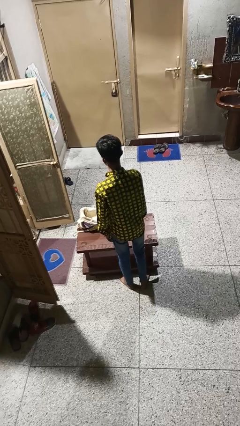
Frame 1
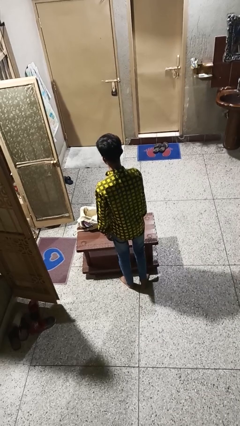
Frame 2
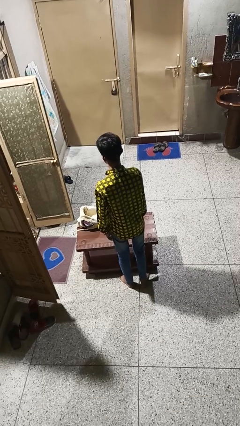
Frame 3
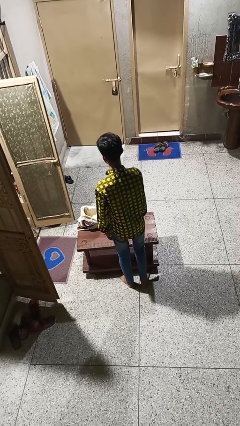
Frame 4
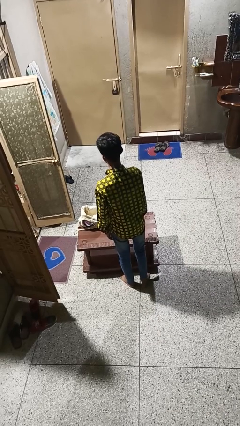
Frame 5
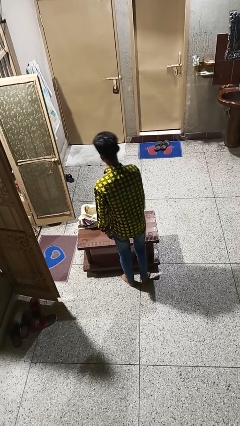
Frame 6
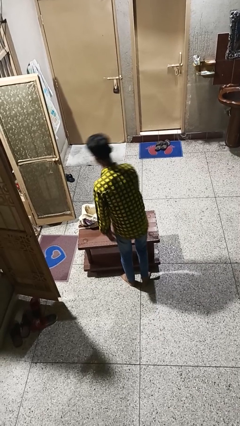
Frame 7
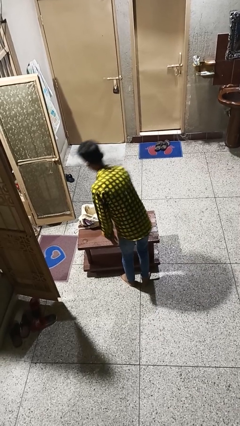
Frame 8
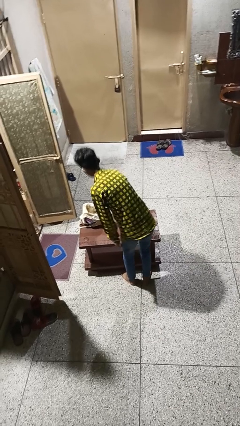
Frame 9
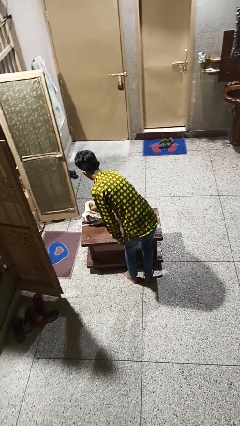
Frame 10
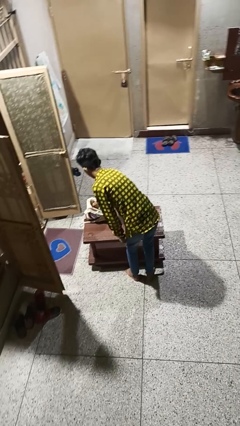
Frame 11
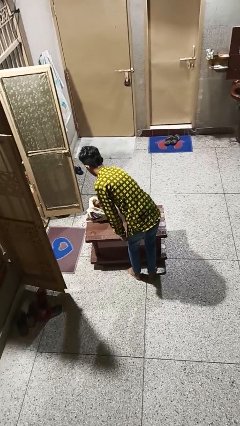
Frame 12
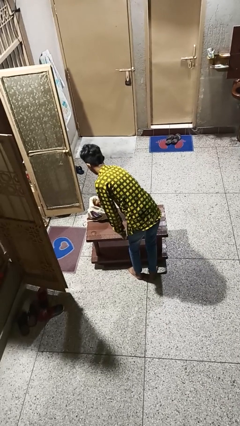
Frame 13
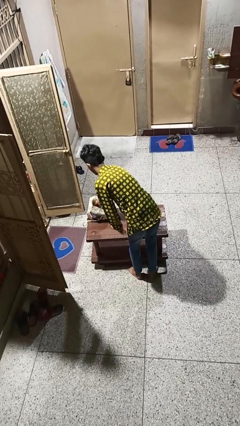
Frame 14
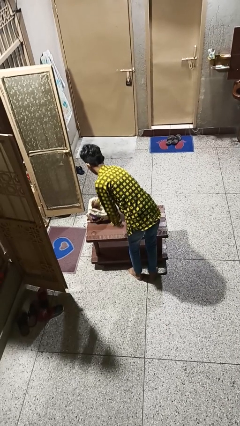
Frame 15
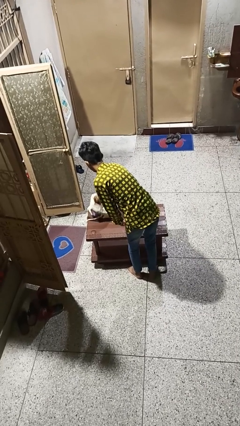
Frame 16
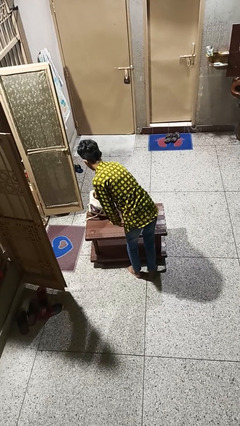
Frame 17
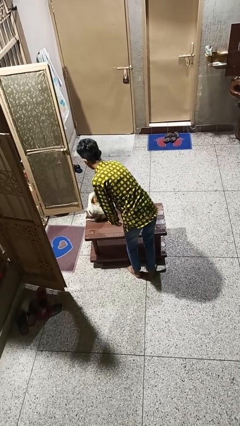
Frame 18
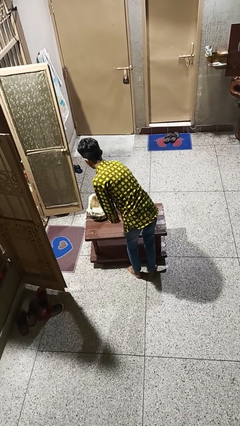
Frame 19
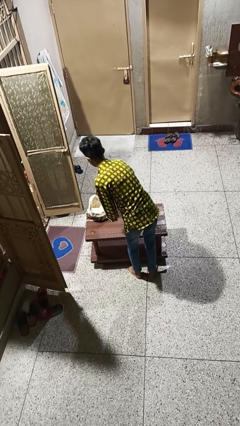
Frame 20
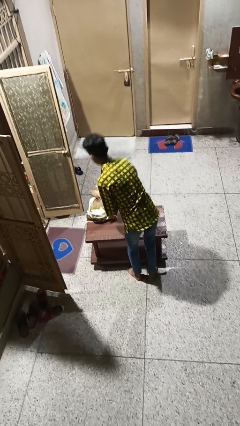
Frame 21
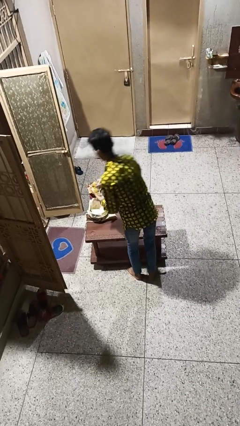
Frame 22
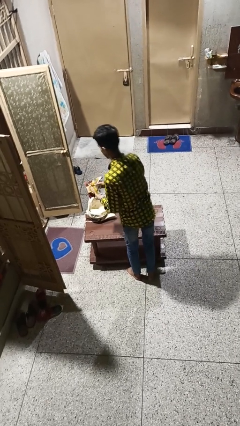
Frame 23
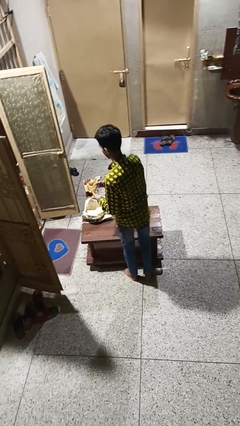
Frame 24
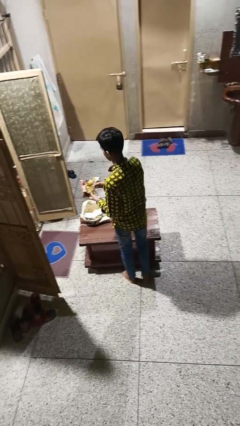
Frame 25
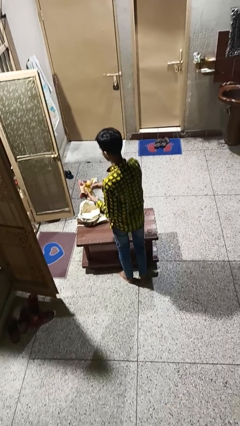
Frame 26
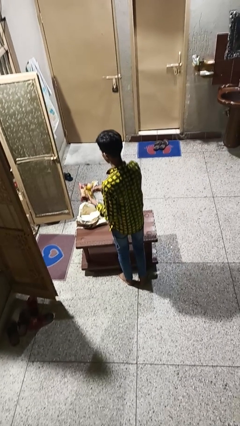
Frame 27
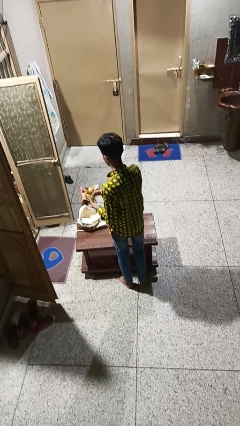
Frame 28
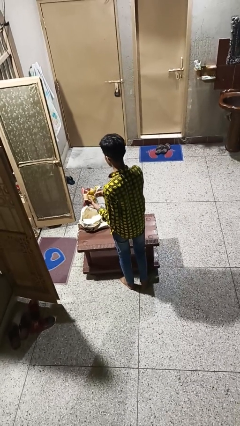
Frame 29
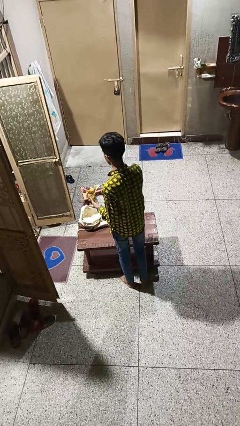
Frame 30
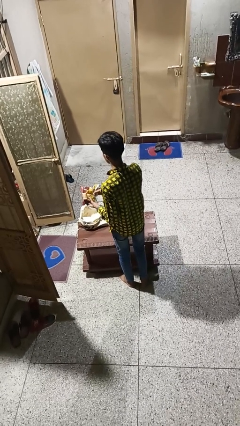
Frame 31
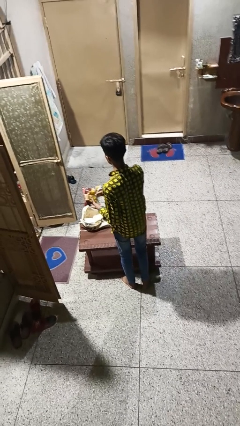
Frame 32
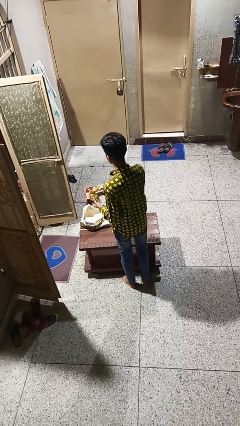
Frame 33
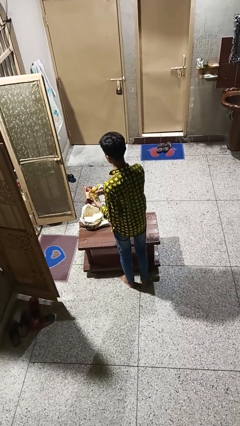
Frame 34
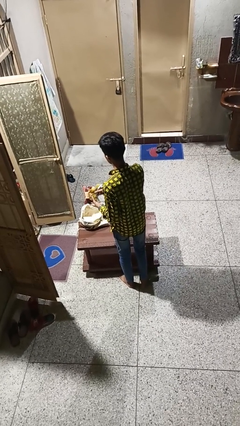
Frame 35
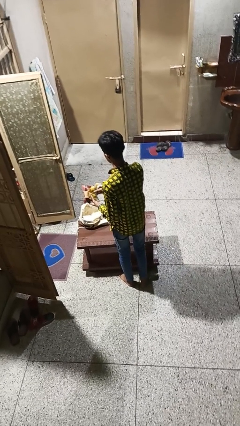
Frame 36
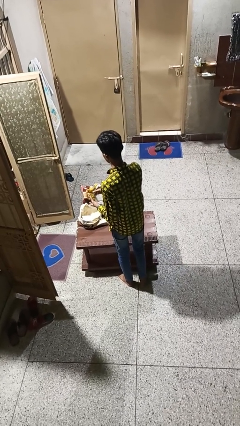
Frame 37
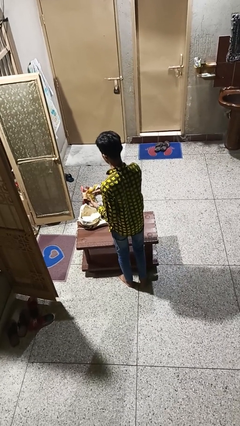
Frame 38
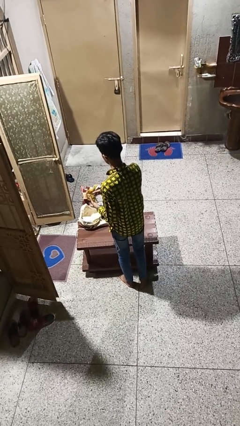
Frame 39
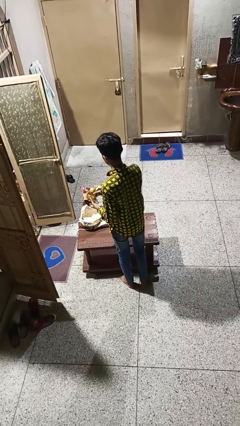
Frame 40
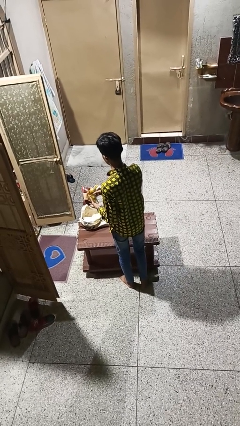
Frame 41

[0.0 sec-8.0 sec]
person takes object from bag

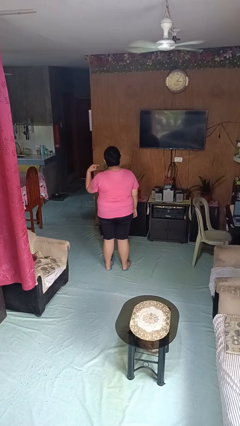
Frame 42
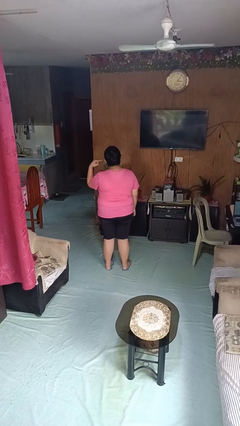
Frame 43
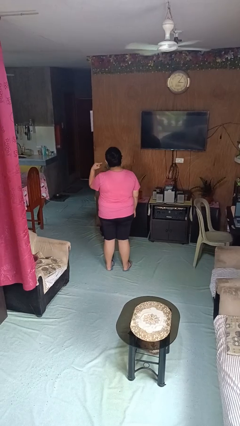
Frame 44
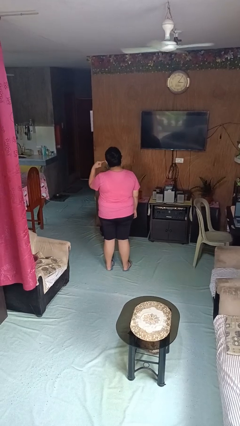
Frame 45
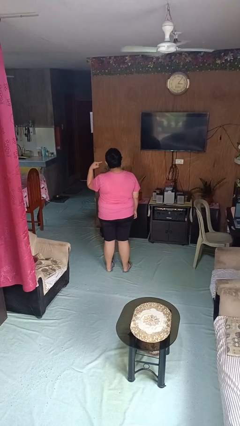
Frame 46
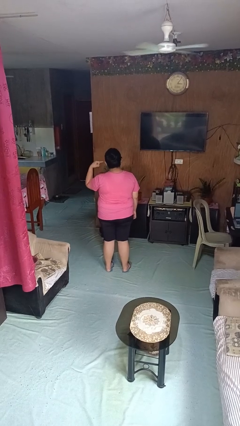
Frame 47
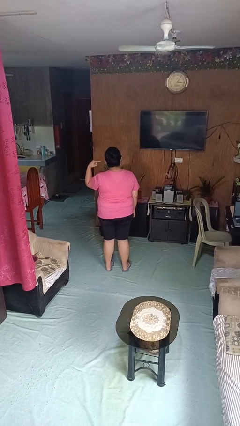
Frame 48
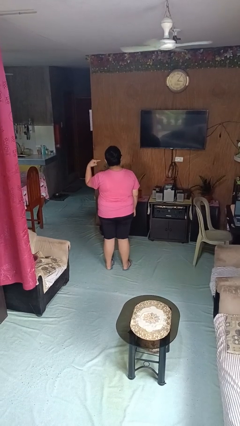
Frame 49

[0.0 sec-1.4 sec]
person gestures listen closely

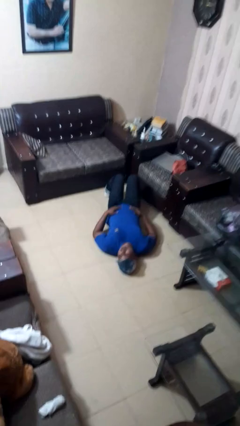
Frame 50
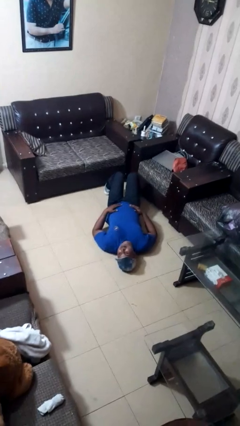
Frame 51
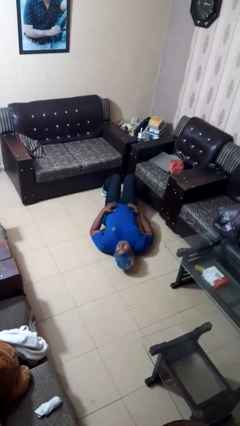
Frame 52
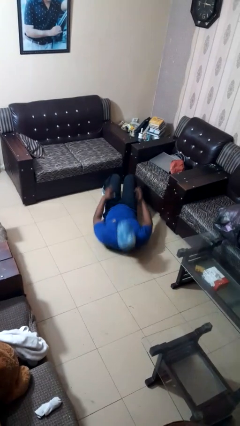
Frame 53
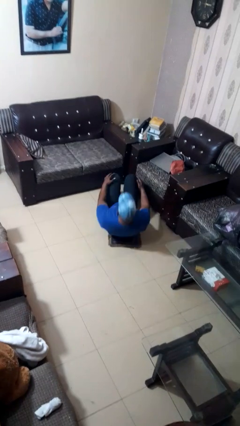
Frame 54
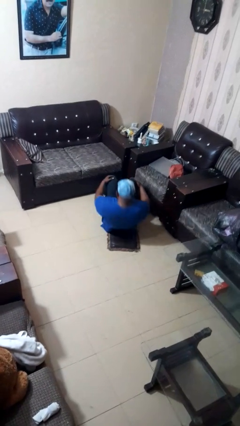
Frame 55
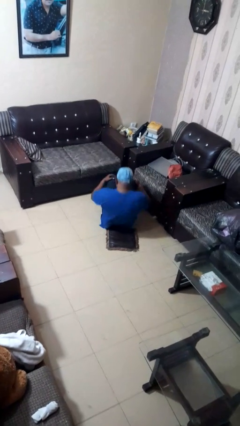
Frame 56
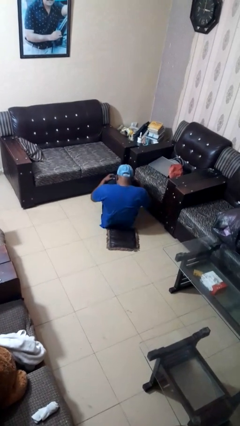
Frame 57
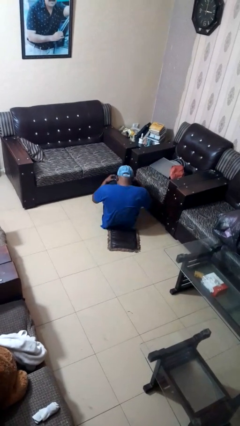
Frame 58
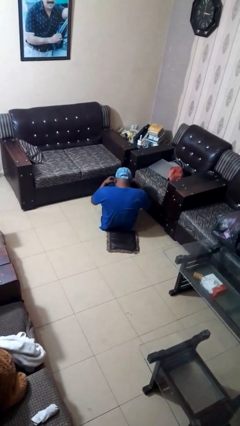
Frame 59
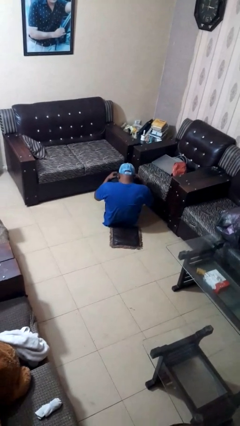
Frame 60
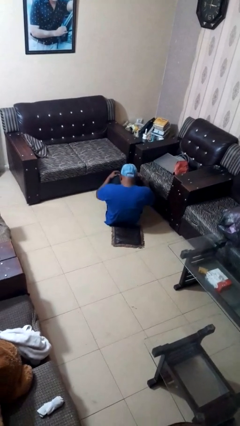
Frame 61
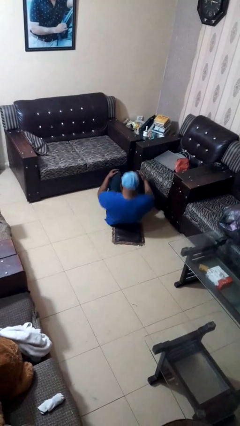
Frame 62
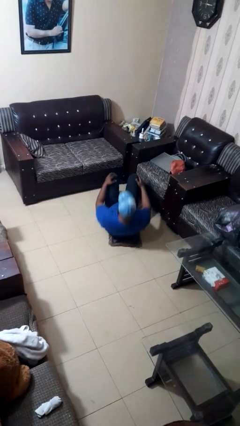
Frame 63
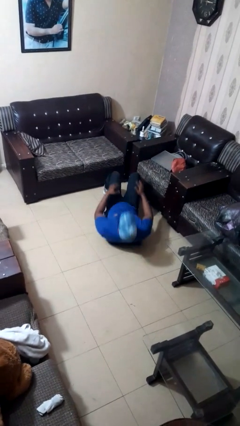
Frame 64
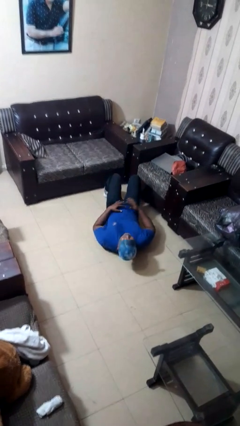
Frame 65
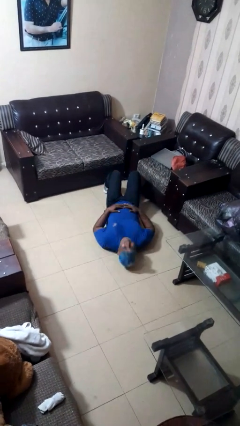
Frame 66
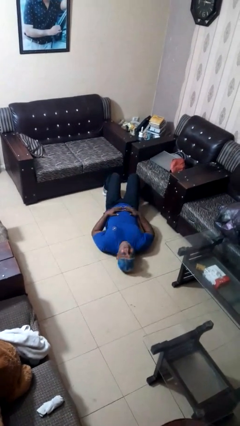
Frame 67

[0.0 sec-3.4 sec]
person exercises with situp

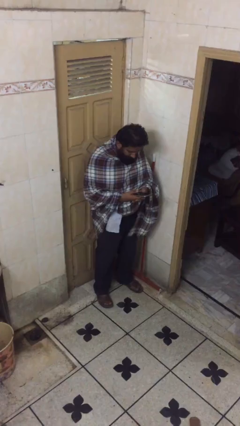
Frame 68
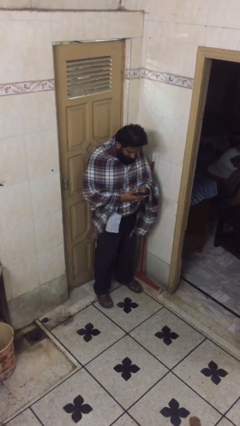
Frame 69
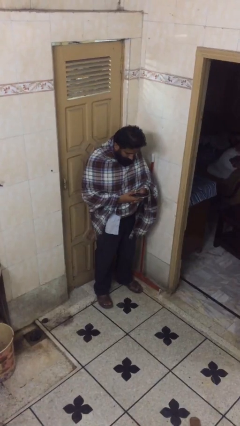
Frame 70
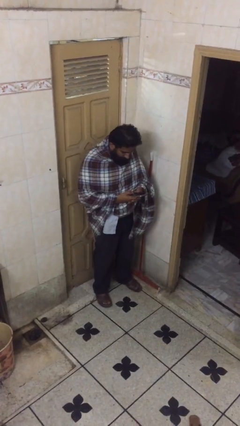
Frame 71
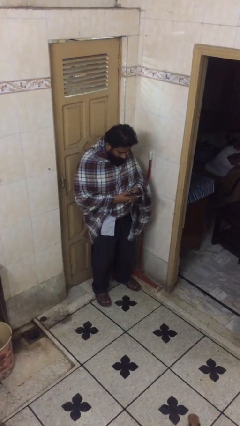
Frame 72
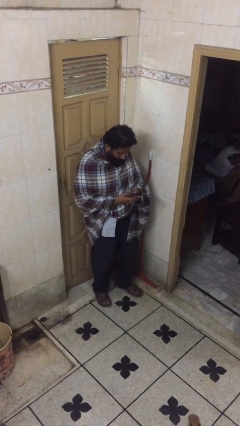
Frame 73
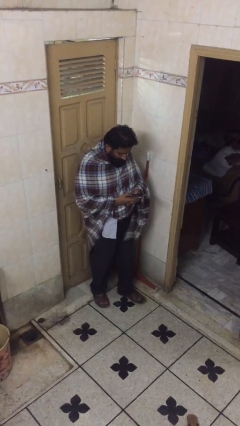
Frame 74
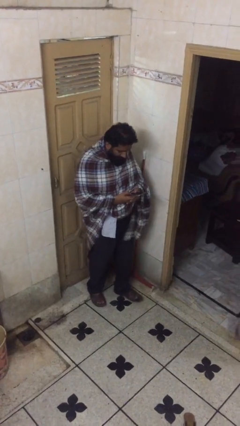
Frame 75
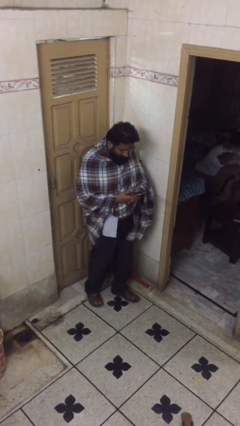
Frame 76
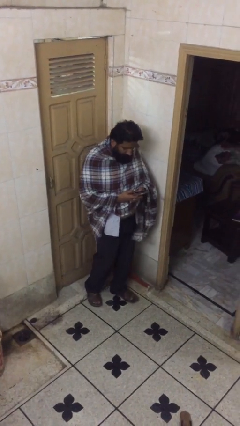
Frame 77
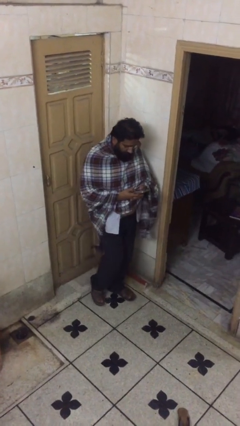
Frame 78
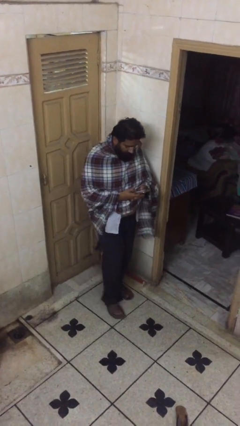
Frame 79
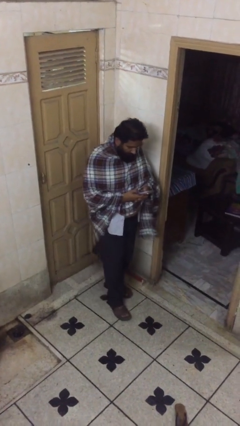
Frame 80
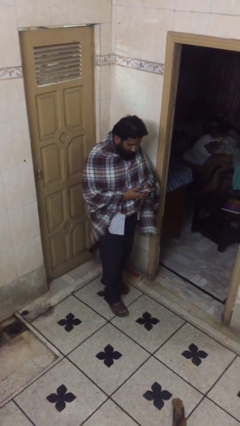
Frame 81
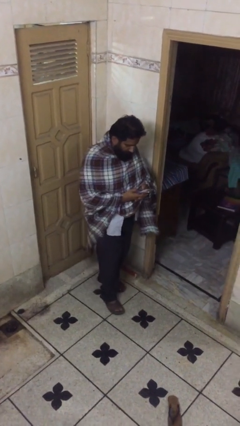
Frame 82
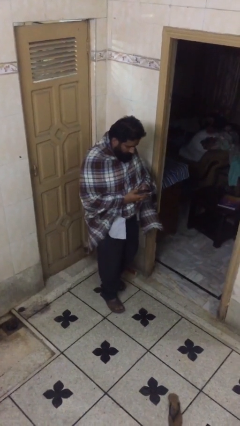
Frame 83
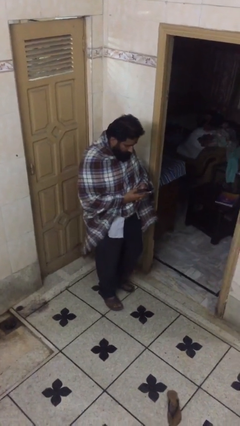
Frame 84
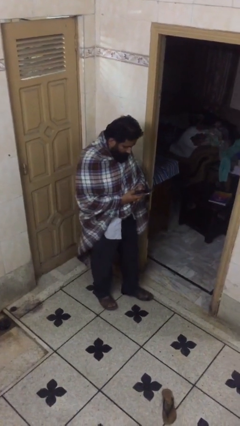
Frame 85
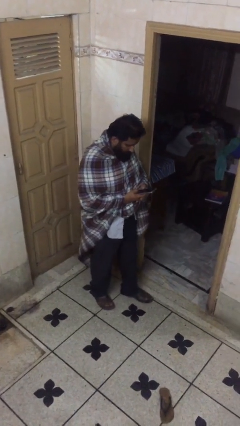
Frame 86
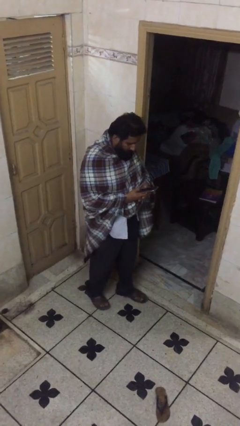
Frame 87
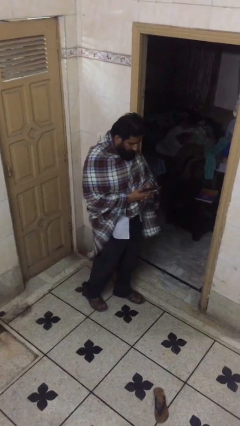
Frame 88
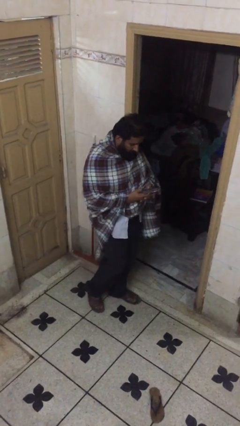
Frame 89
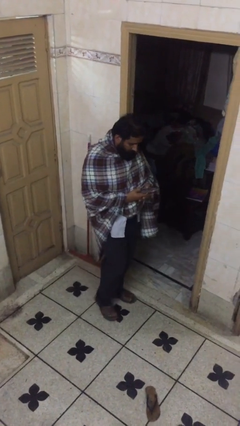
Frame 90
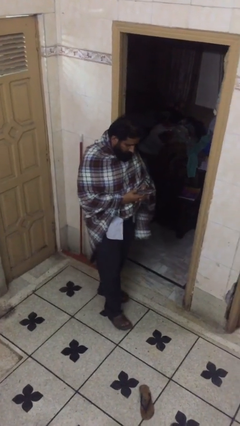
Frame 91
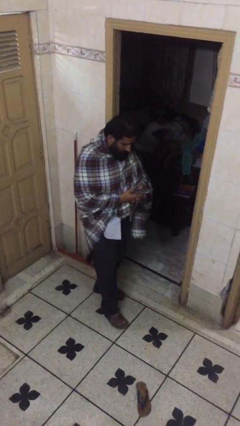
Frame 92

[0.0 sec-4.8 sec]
person texts on phone

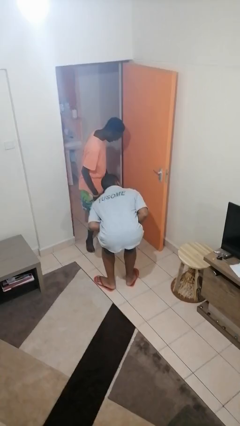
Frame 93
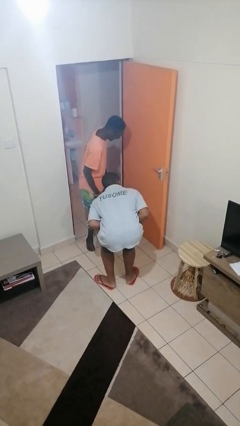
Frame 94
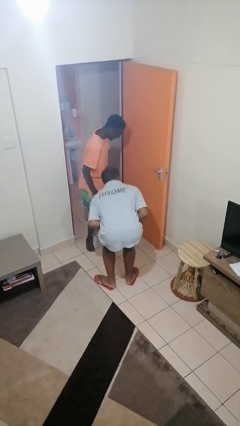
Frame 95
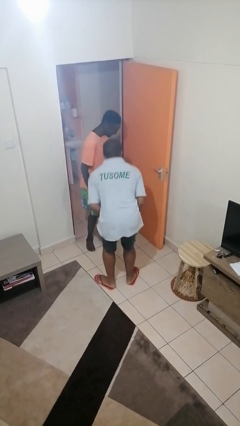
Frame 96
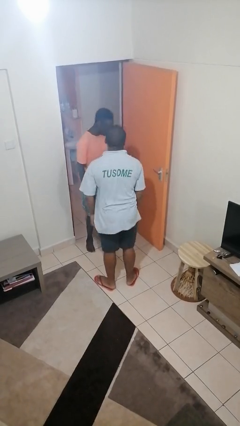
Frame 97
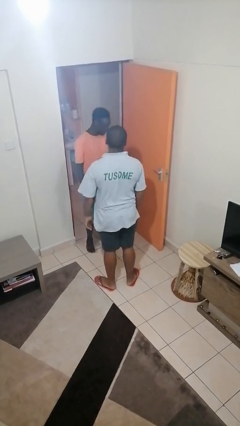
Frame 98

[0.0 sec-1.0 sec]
person laughs with person
